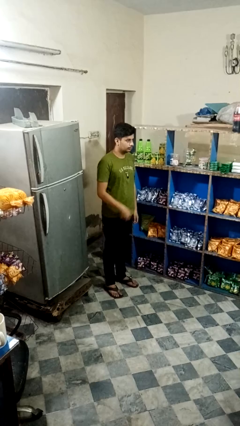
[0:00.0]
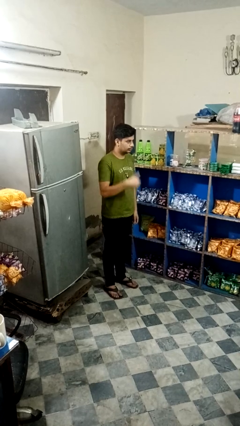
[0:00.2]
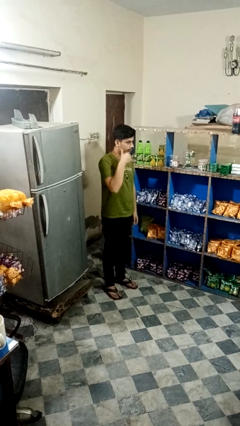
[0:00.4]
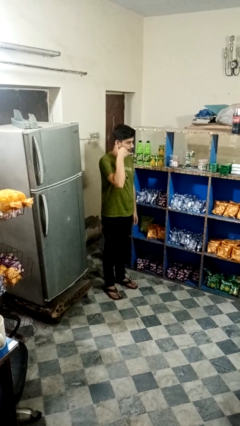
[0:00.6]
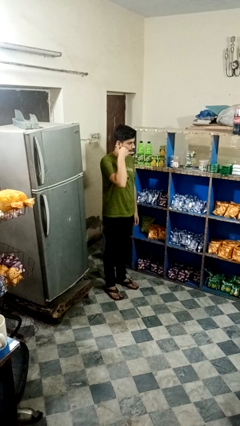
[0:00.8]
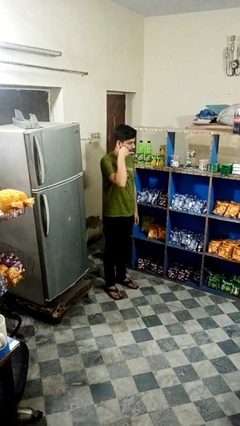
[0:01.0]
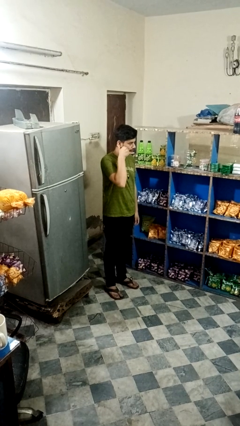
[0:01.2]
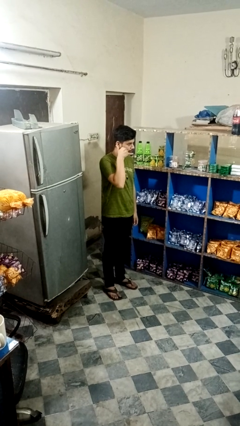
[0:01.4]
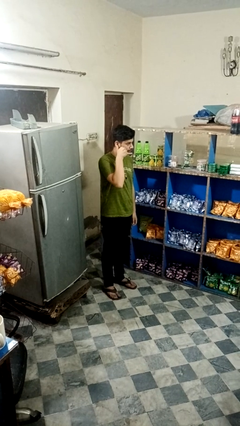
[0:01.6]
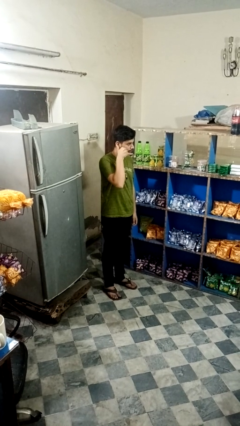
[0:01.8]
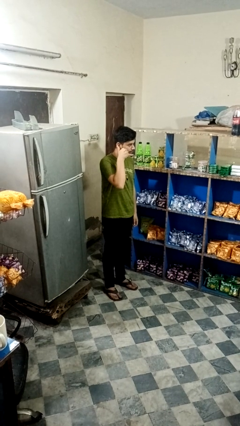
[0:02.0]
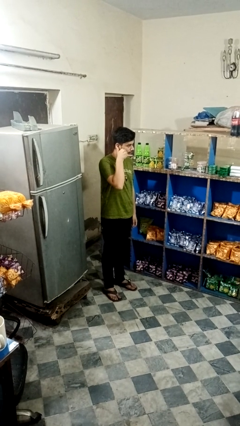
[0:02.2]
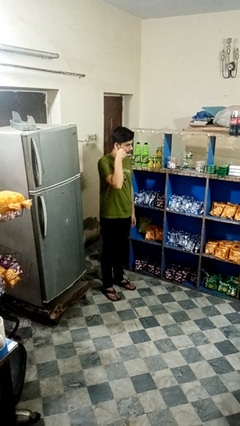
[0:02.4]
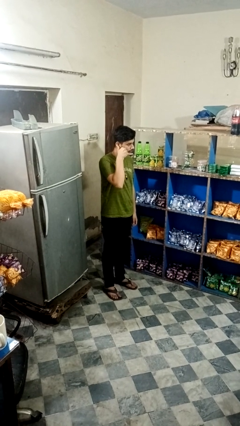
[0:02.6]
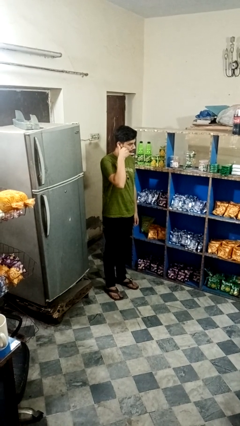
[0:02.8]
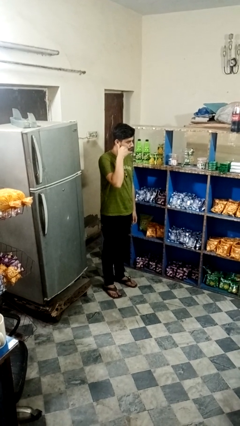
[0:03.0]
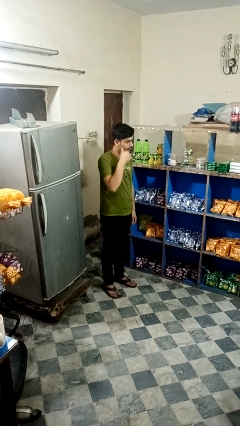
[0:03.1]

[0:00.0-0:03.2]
person gestures heart

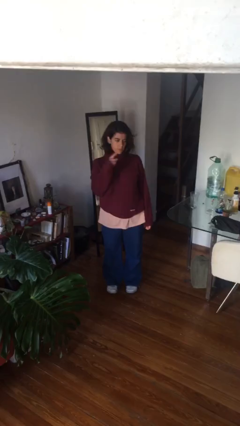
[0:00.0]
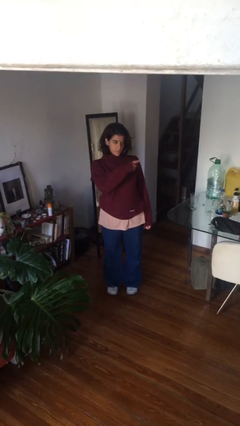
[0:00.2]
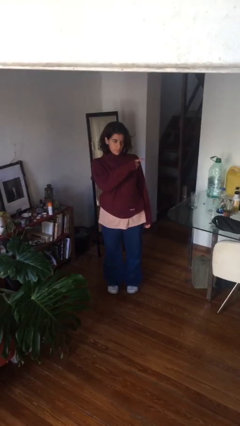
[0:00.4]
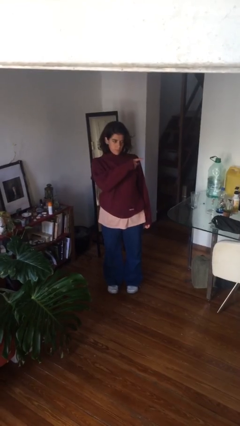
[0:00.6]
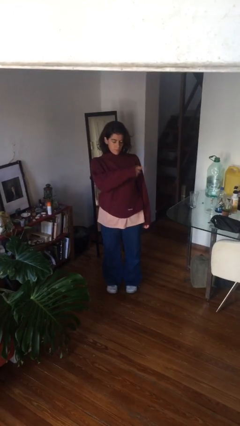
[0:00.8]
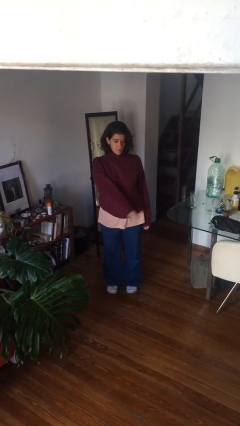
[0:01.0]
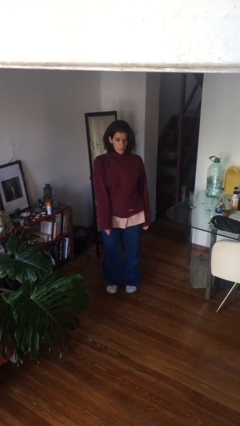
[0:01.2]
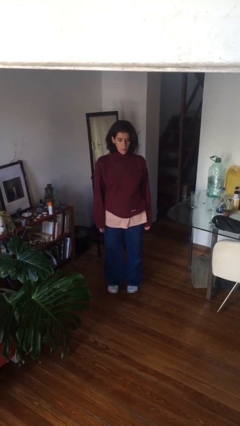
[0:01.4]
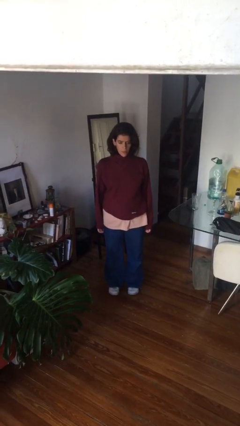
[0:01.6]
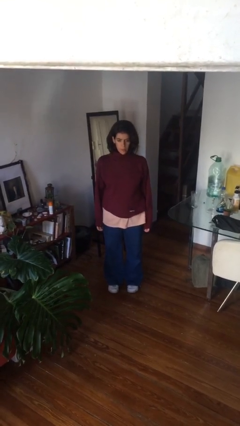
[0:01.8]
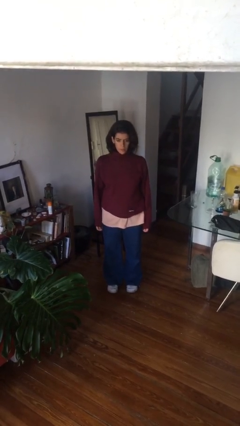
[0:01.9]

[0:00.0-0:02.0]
person gestures swipe left

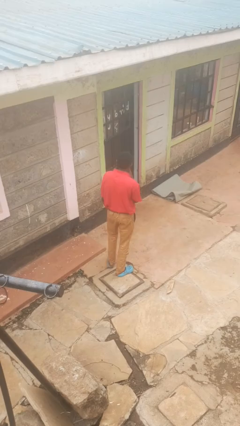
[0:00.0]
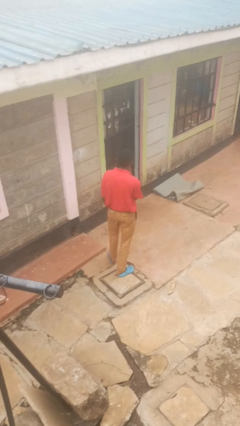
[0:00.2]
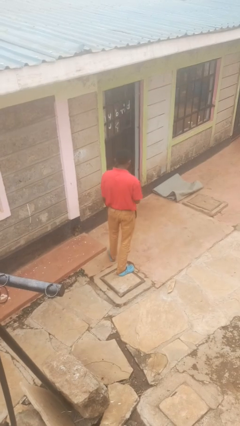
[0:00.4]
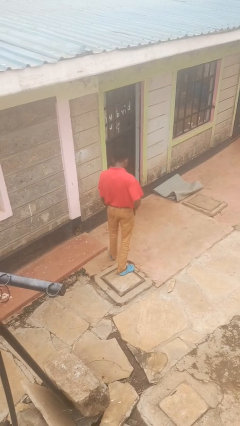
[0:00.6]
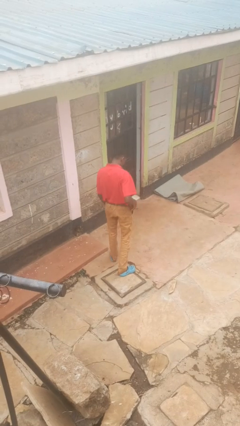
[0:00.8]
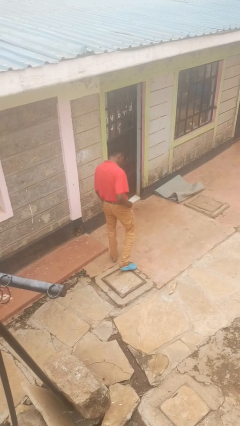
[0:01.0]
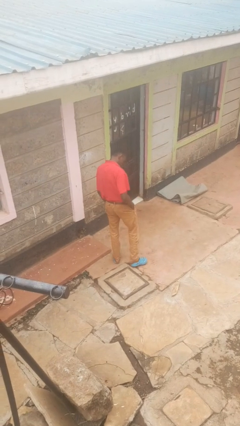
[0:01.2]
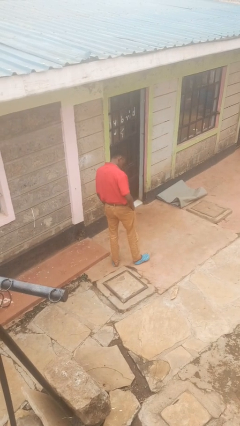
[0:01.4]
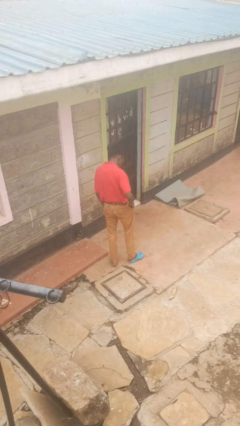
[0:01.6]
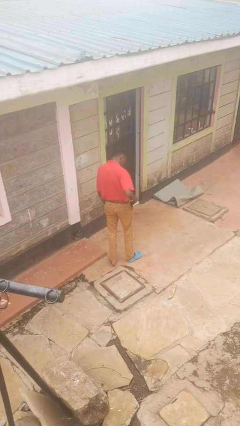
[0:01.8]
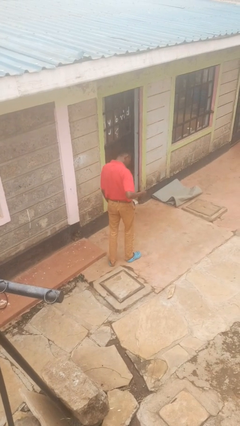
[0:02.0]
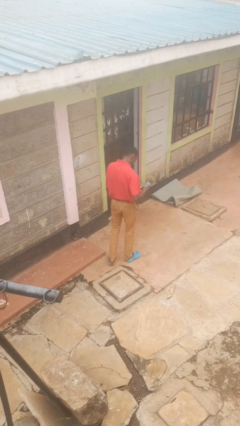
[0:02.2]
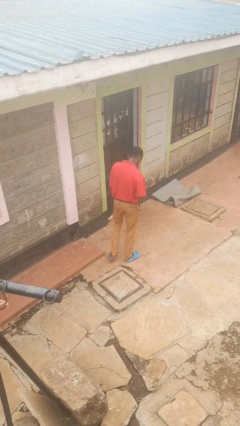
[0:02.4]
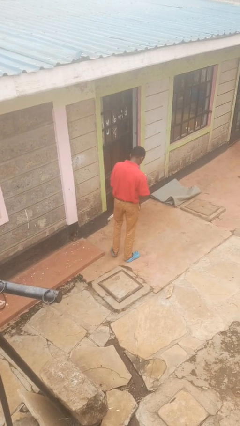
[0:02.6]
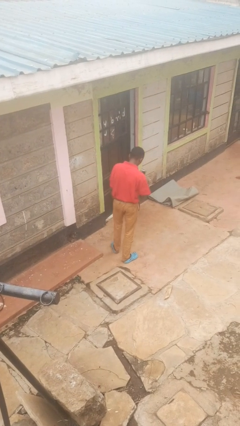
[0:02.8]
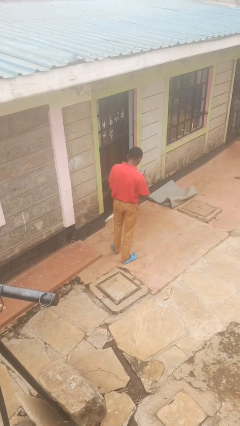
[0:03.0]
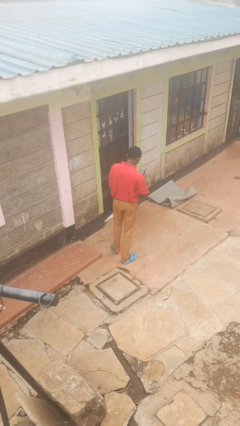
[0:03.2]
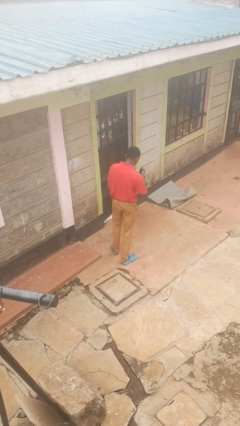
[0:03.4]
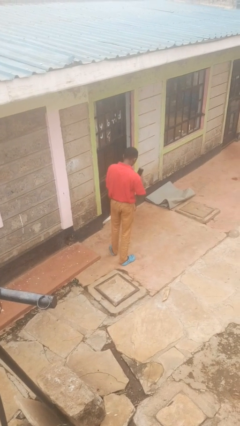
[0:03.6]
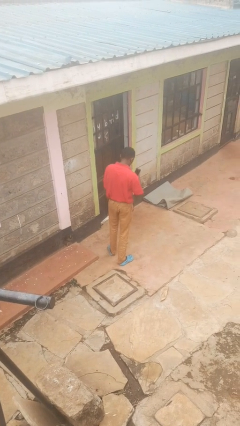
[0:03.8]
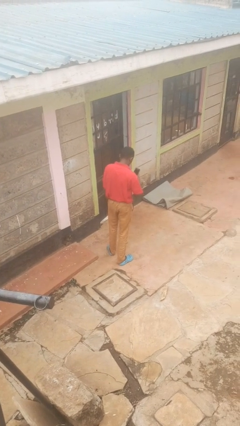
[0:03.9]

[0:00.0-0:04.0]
person takes phone from pocket

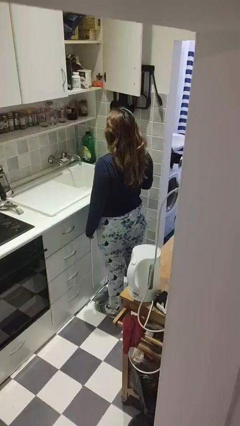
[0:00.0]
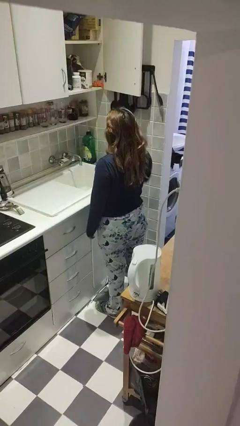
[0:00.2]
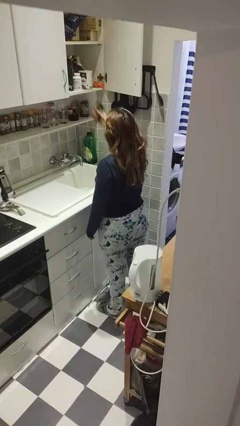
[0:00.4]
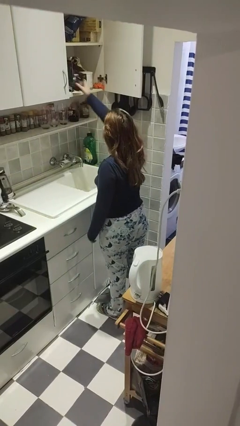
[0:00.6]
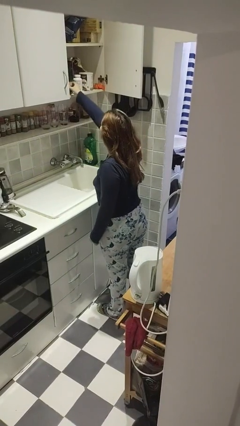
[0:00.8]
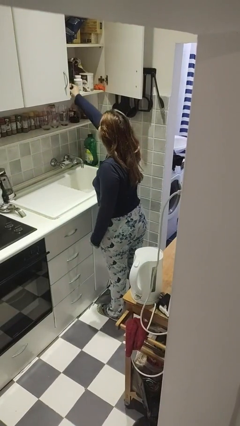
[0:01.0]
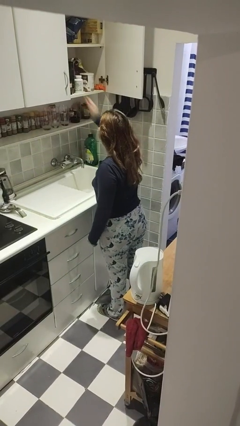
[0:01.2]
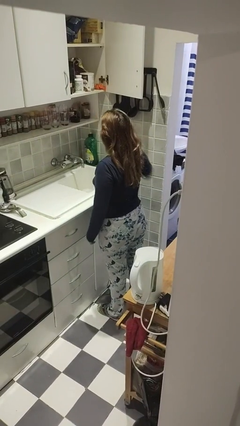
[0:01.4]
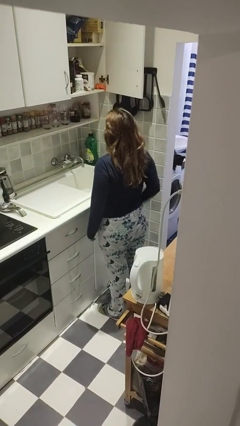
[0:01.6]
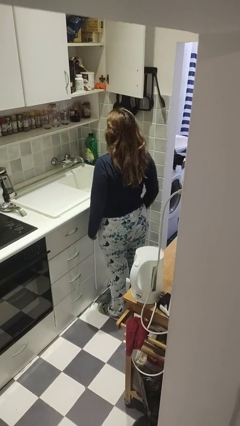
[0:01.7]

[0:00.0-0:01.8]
person puts object in cabinet

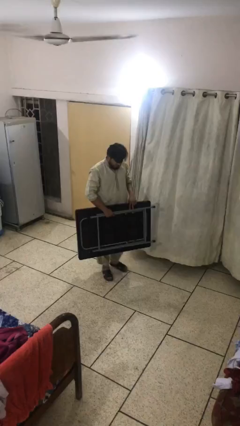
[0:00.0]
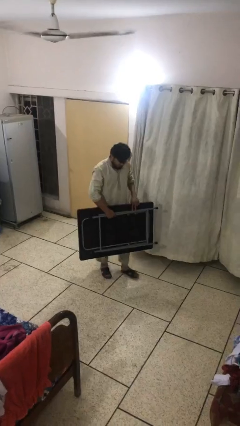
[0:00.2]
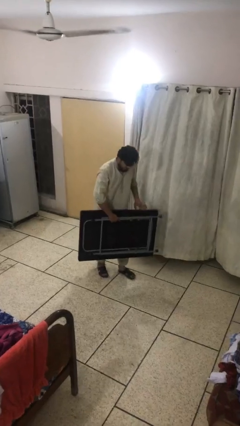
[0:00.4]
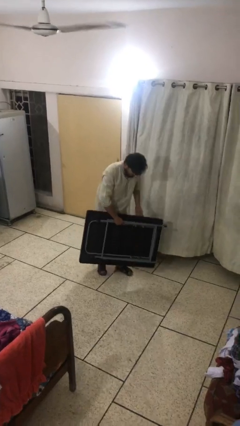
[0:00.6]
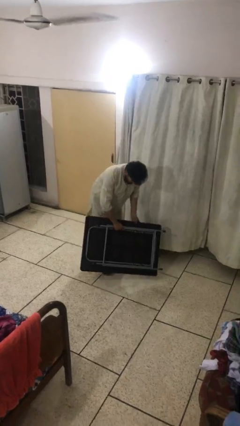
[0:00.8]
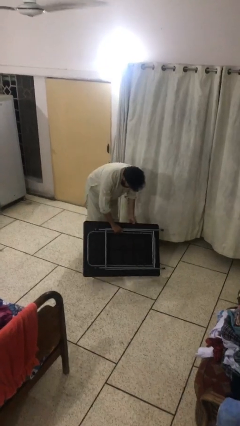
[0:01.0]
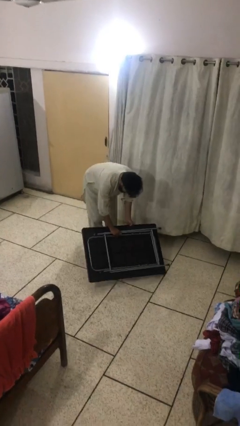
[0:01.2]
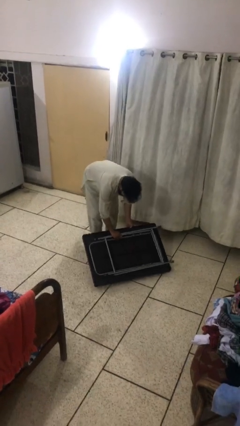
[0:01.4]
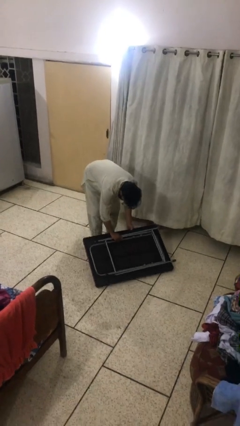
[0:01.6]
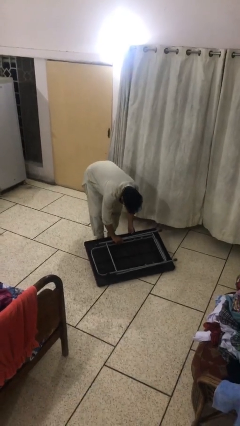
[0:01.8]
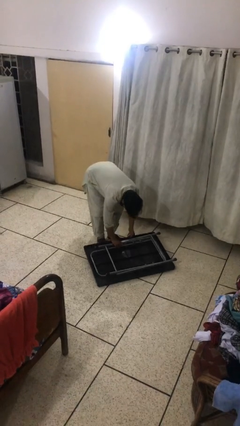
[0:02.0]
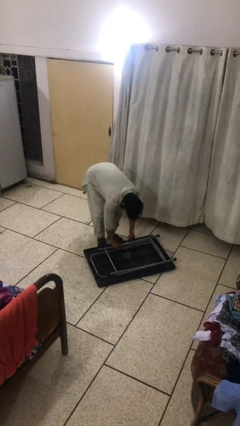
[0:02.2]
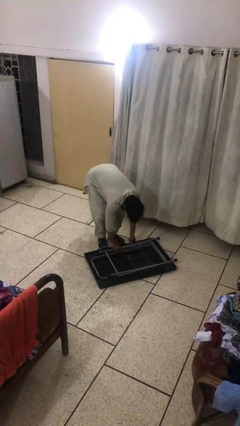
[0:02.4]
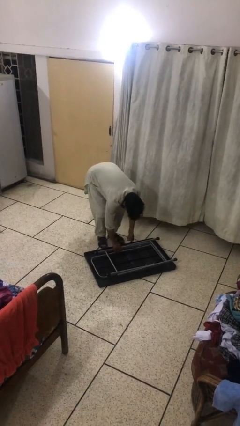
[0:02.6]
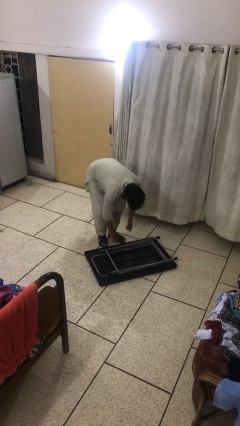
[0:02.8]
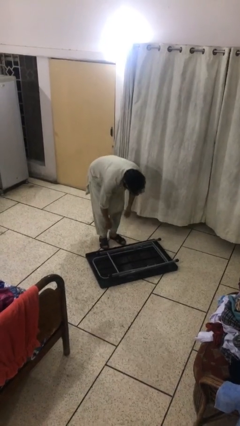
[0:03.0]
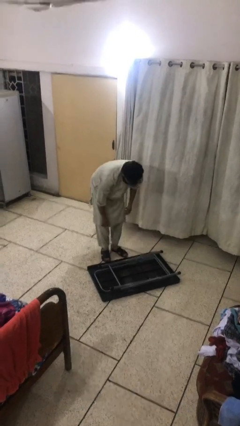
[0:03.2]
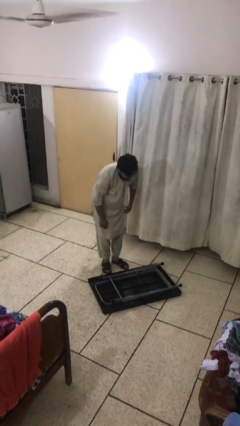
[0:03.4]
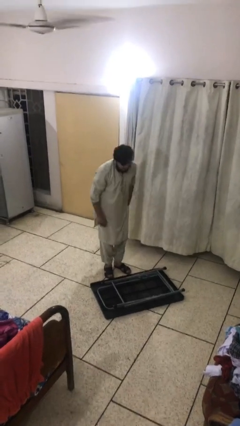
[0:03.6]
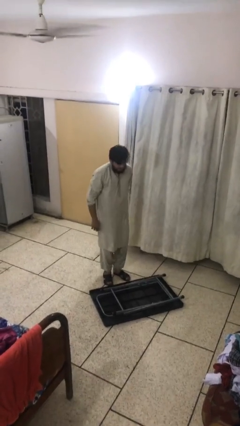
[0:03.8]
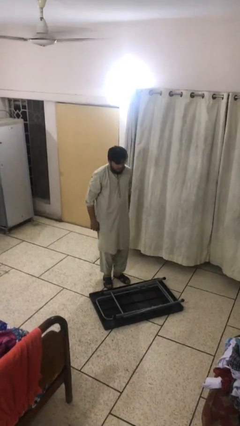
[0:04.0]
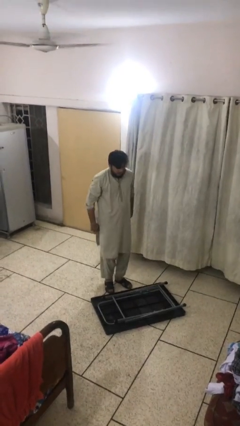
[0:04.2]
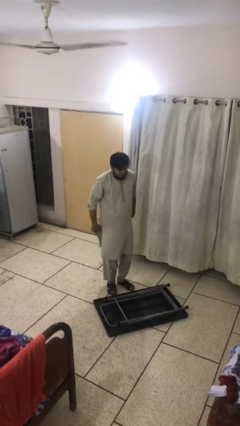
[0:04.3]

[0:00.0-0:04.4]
person puts down object on floor

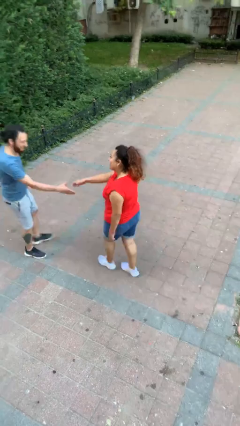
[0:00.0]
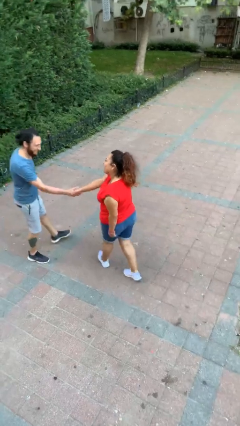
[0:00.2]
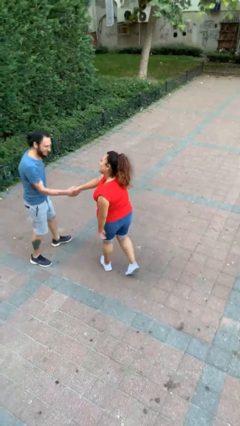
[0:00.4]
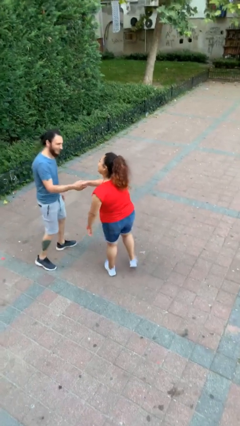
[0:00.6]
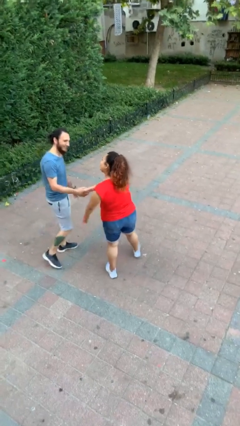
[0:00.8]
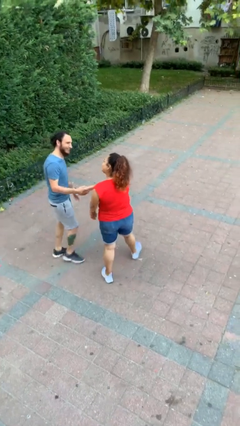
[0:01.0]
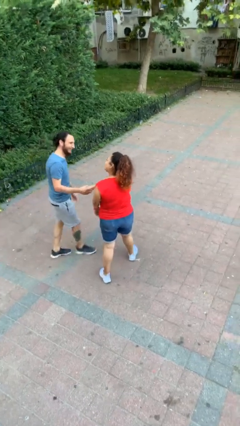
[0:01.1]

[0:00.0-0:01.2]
person shakes hand

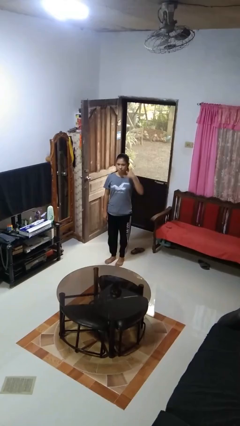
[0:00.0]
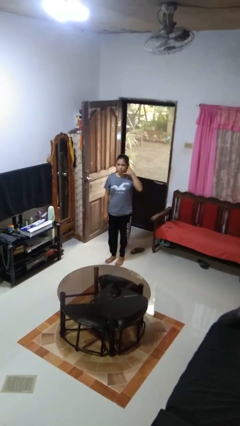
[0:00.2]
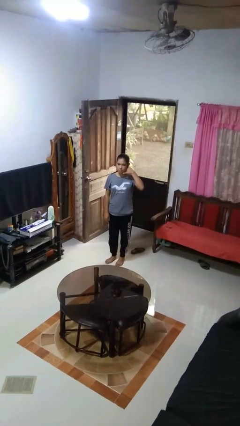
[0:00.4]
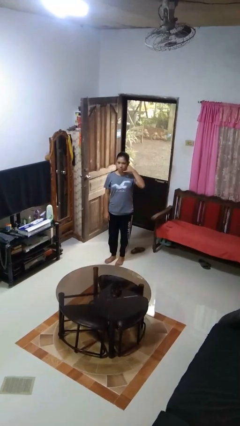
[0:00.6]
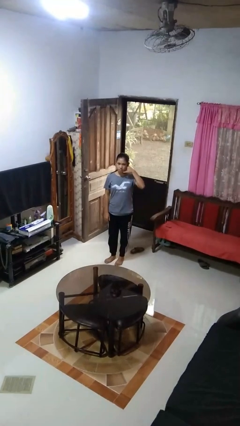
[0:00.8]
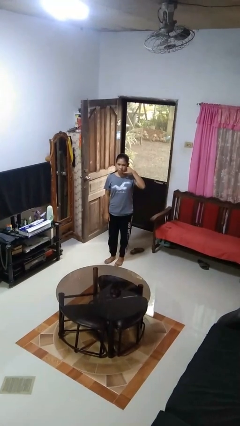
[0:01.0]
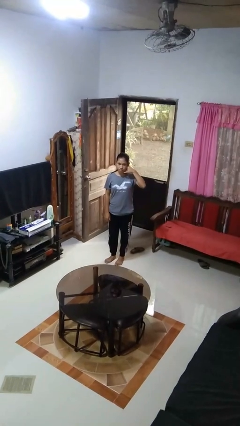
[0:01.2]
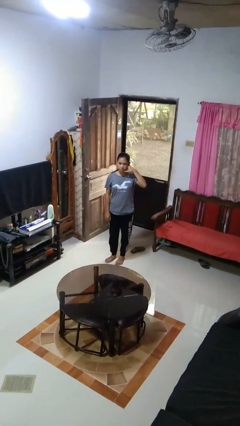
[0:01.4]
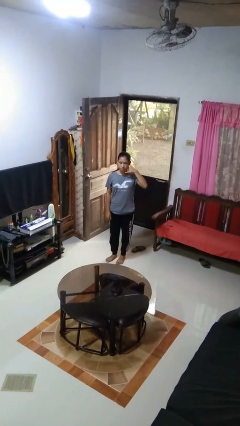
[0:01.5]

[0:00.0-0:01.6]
person gestures call me
